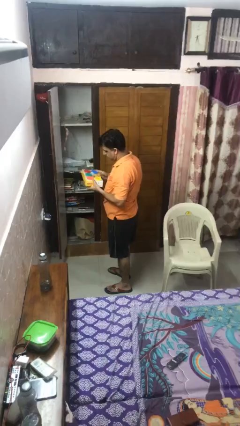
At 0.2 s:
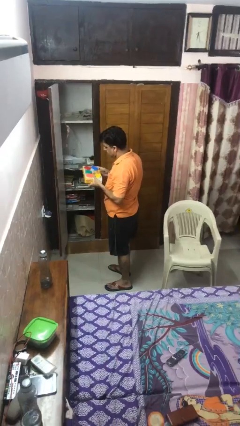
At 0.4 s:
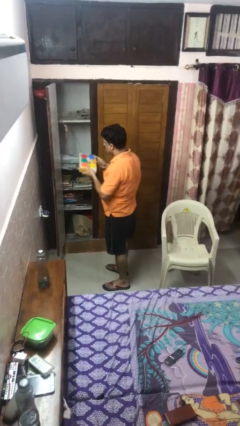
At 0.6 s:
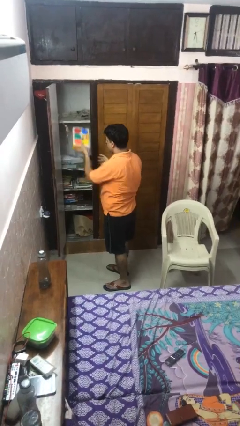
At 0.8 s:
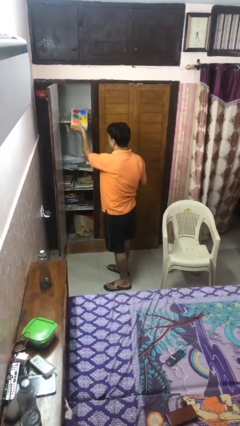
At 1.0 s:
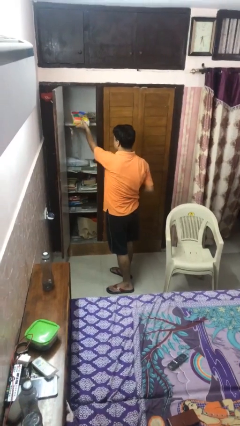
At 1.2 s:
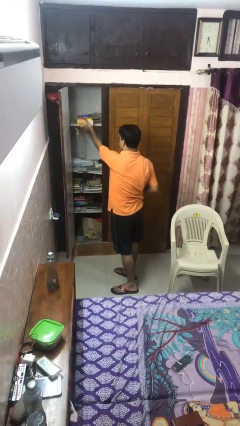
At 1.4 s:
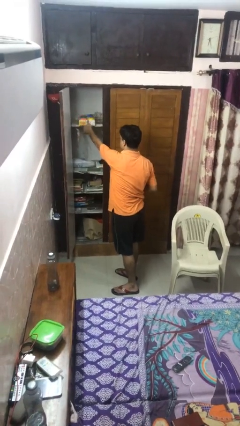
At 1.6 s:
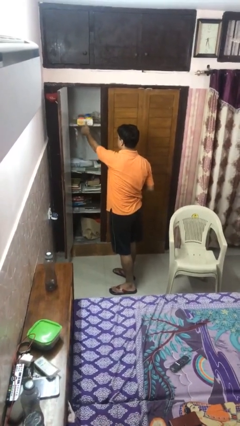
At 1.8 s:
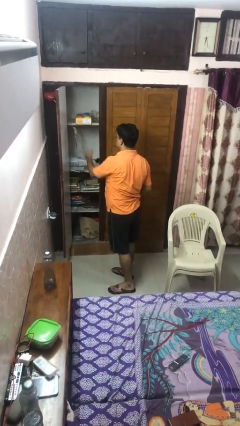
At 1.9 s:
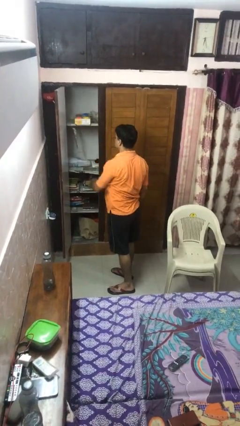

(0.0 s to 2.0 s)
person puts down object on shelf

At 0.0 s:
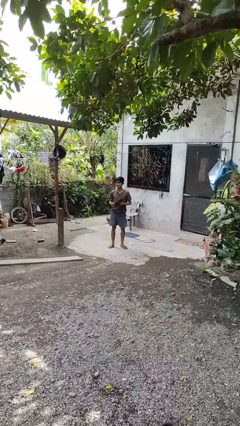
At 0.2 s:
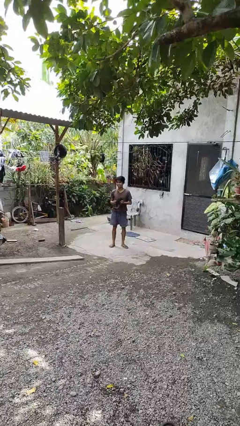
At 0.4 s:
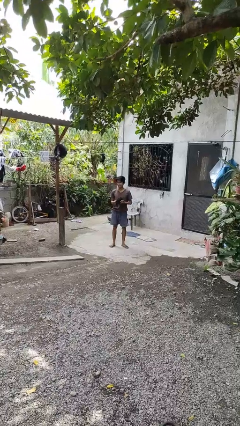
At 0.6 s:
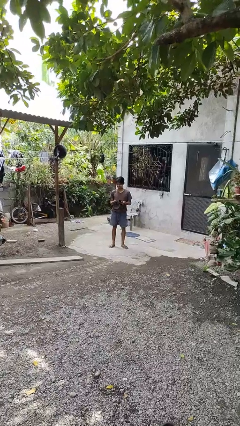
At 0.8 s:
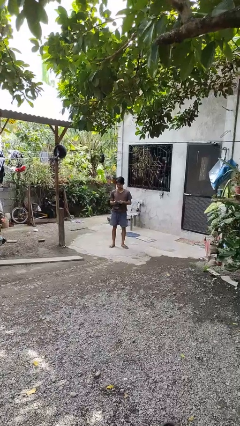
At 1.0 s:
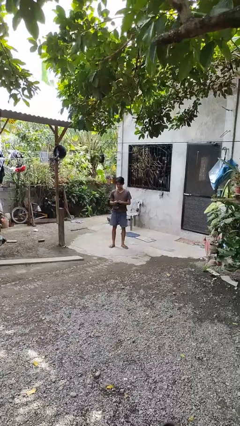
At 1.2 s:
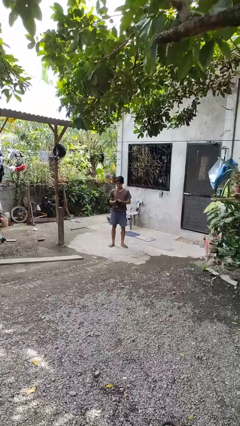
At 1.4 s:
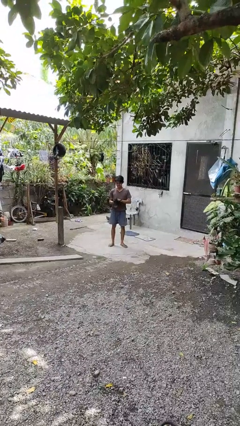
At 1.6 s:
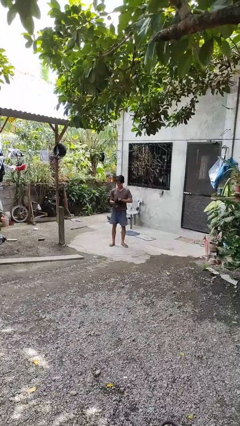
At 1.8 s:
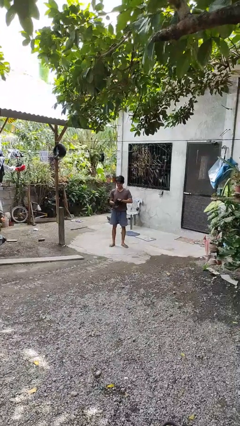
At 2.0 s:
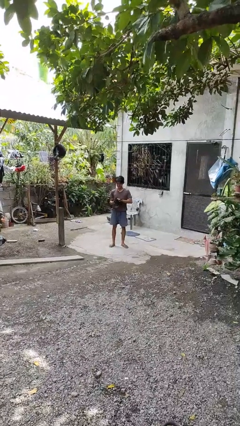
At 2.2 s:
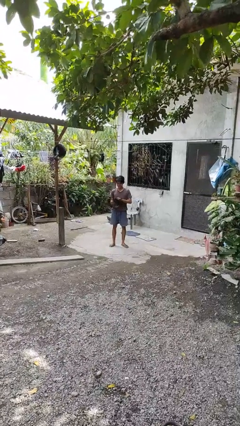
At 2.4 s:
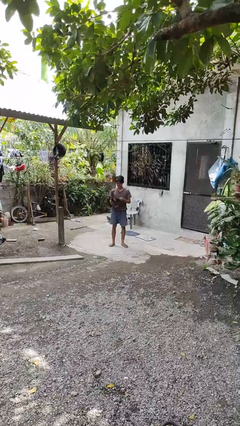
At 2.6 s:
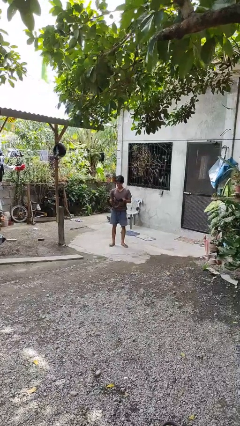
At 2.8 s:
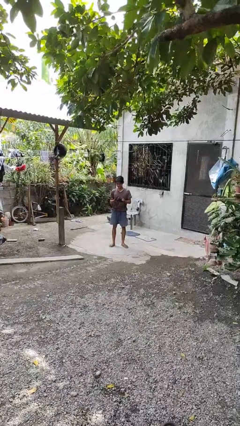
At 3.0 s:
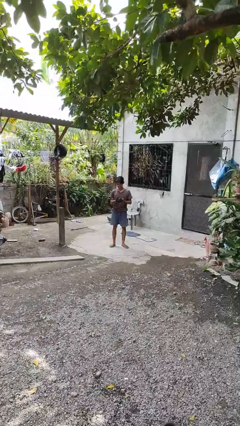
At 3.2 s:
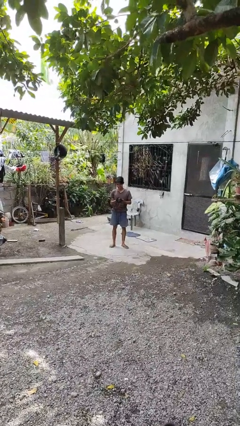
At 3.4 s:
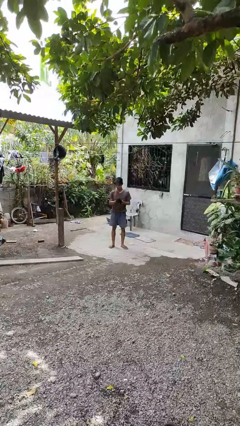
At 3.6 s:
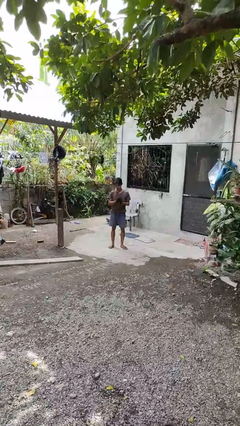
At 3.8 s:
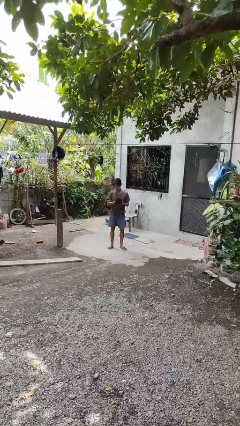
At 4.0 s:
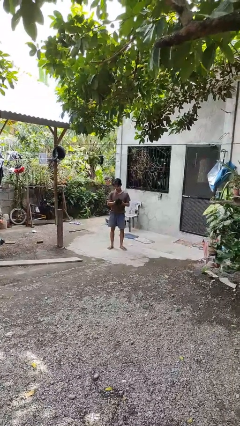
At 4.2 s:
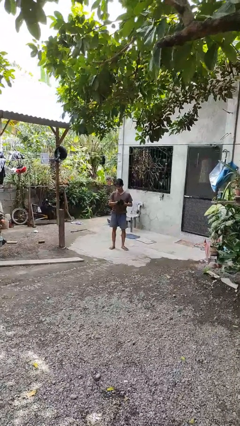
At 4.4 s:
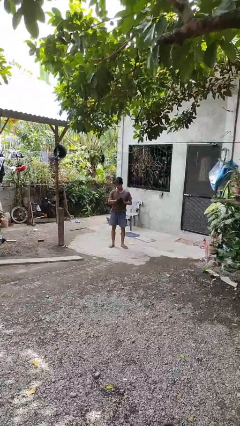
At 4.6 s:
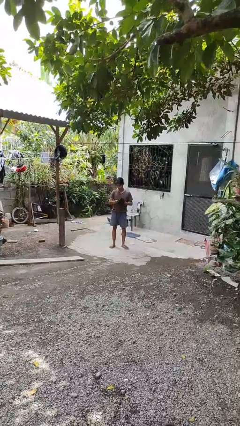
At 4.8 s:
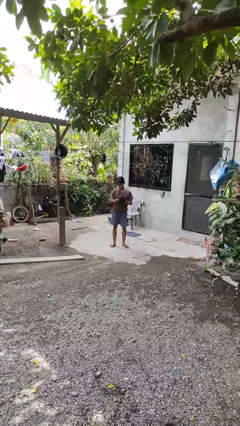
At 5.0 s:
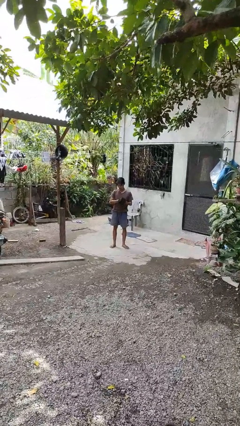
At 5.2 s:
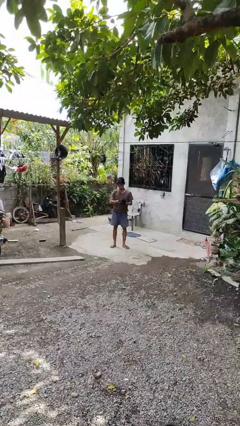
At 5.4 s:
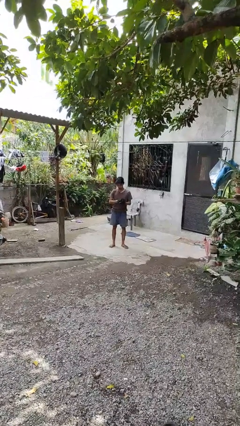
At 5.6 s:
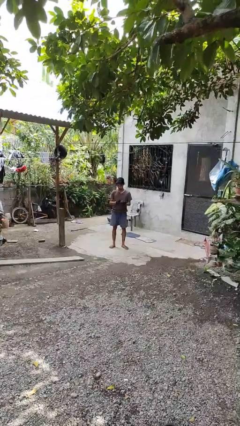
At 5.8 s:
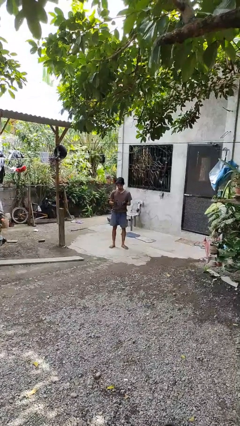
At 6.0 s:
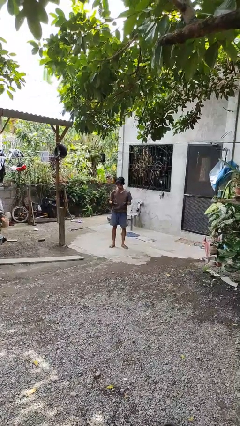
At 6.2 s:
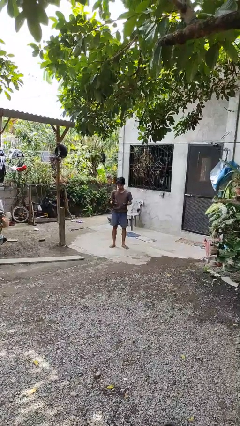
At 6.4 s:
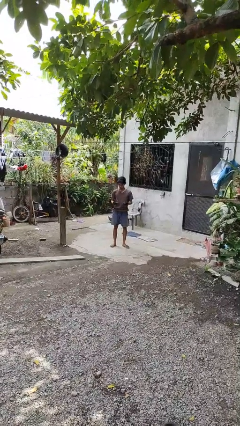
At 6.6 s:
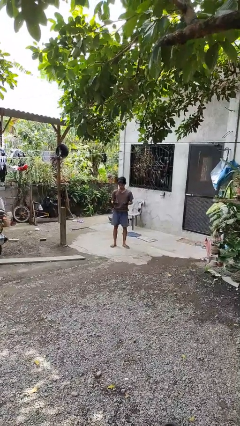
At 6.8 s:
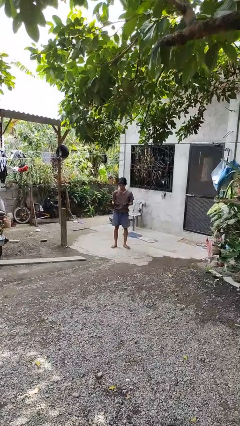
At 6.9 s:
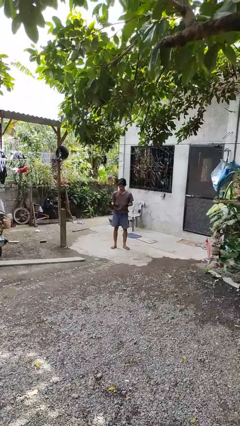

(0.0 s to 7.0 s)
person puts on gloves

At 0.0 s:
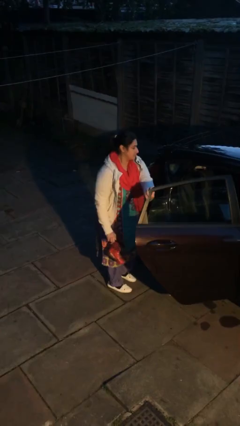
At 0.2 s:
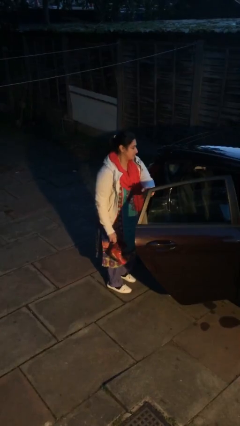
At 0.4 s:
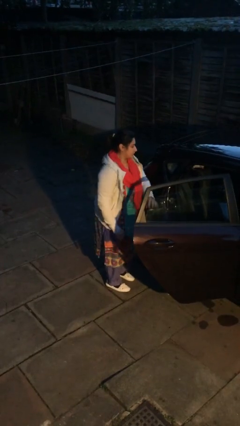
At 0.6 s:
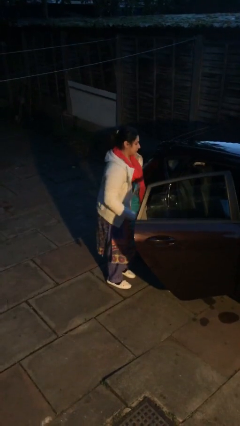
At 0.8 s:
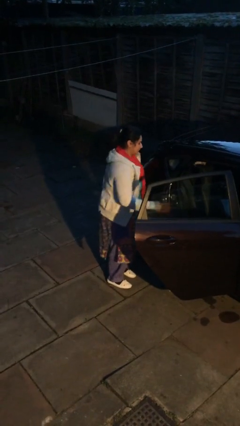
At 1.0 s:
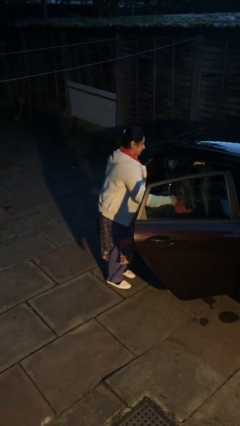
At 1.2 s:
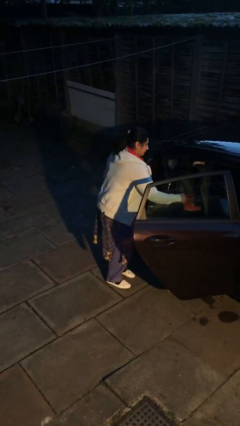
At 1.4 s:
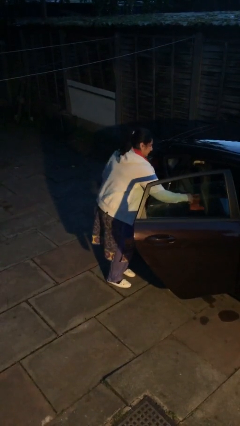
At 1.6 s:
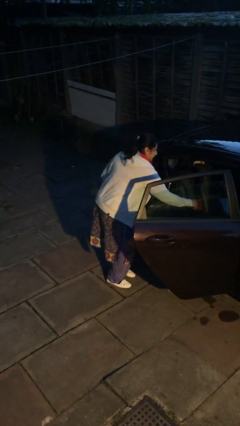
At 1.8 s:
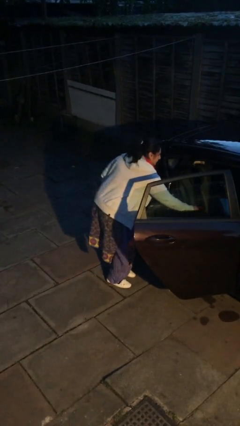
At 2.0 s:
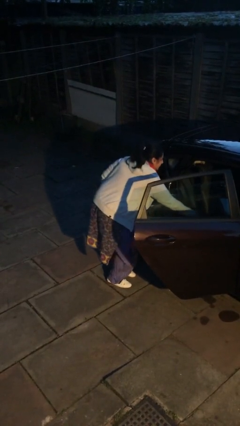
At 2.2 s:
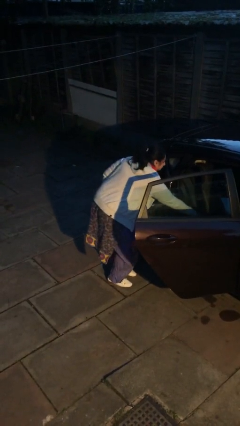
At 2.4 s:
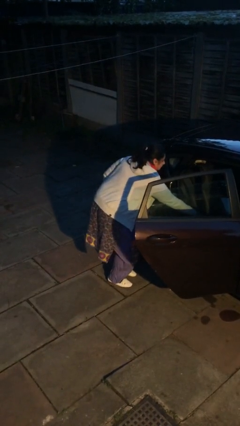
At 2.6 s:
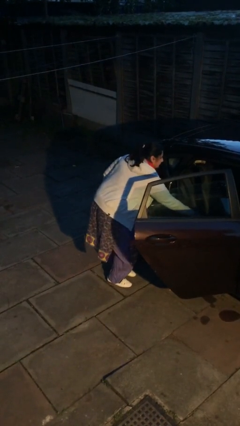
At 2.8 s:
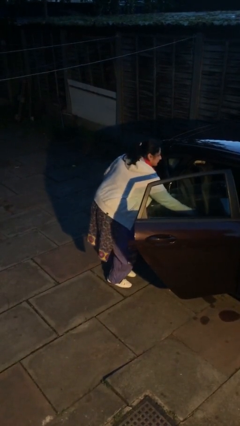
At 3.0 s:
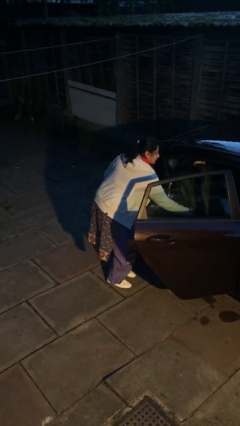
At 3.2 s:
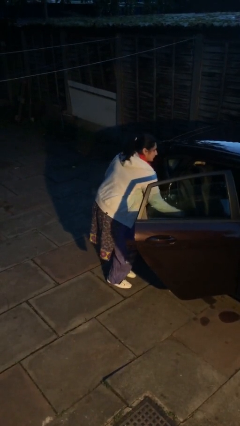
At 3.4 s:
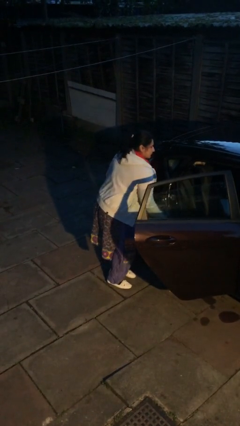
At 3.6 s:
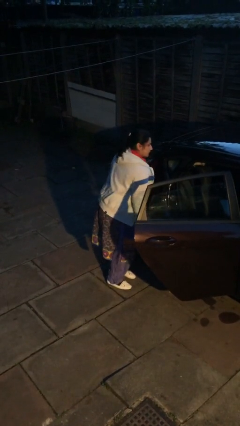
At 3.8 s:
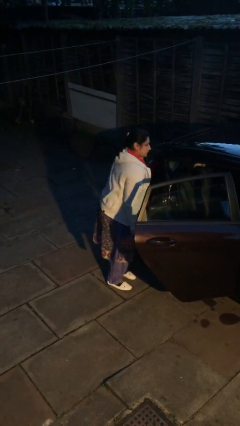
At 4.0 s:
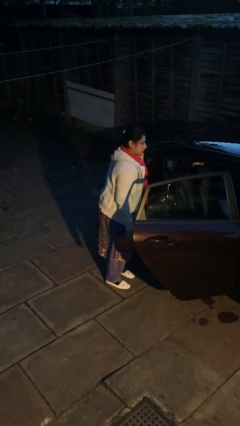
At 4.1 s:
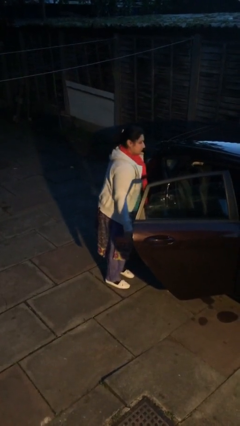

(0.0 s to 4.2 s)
person loads car

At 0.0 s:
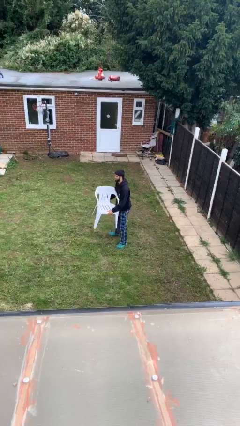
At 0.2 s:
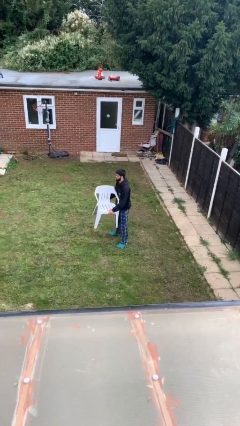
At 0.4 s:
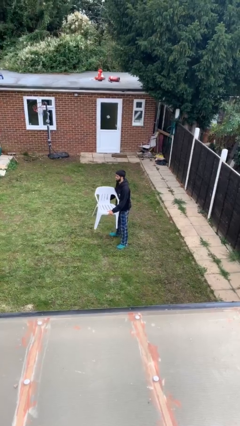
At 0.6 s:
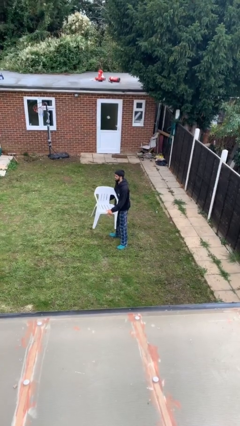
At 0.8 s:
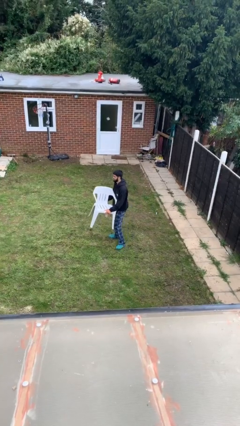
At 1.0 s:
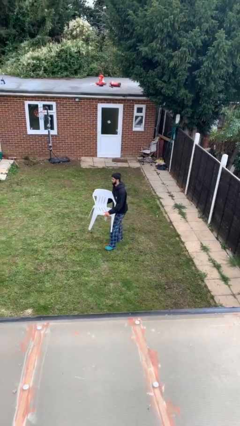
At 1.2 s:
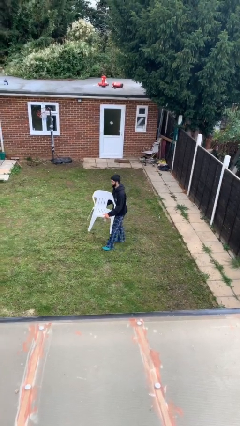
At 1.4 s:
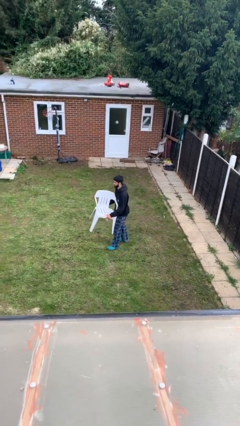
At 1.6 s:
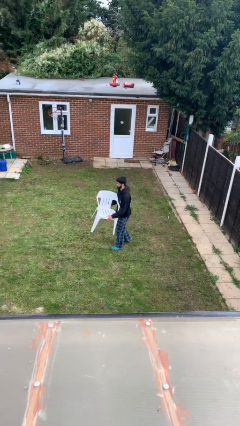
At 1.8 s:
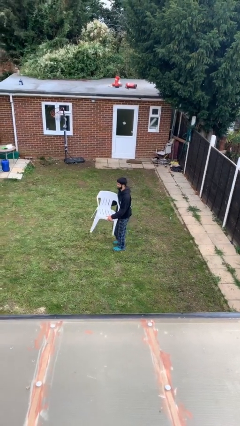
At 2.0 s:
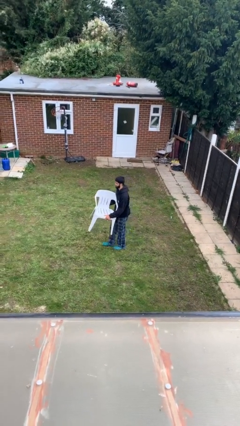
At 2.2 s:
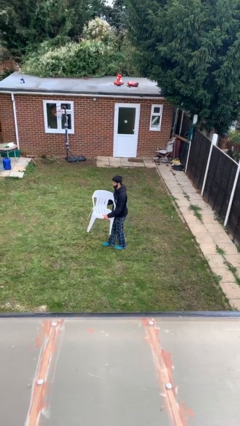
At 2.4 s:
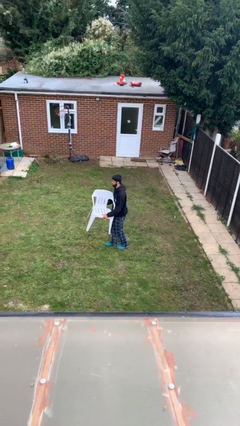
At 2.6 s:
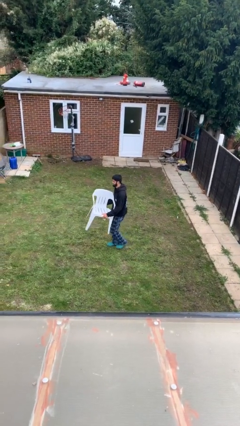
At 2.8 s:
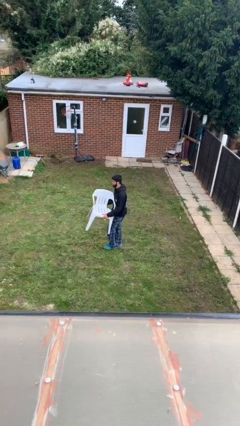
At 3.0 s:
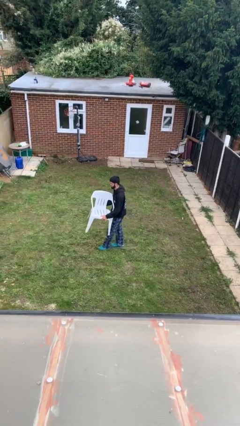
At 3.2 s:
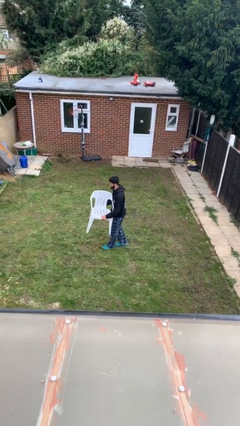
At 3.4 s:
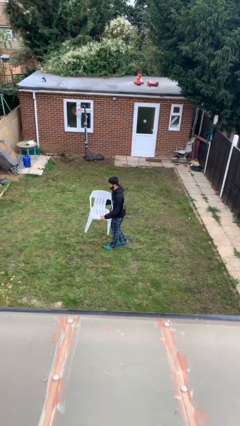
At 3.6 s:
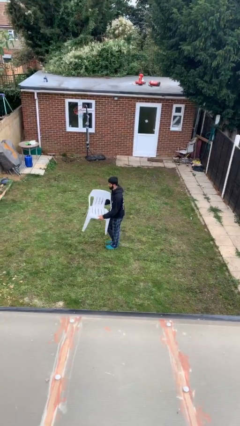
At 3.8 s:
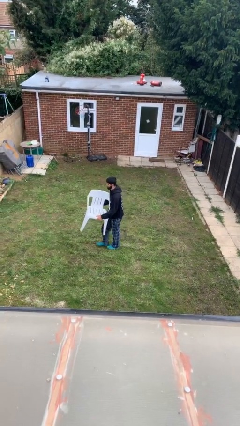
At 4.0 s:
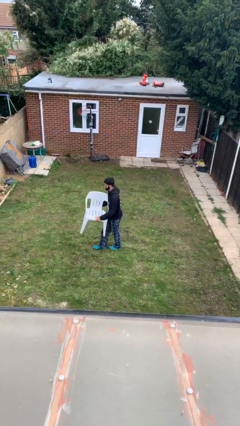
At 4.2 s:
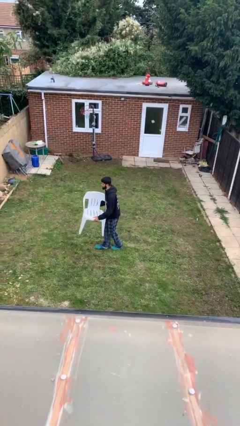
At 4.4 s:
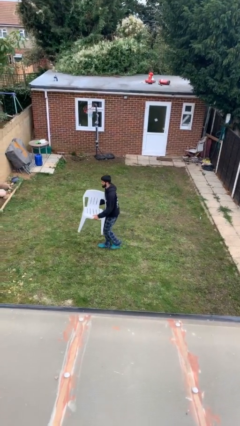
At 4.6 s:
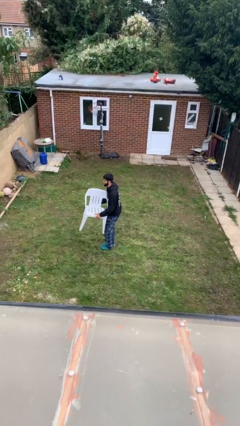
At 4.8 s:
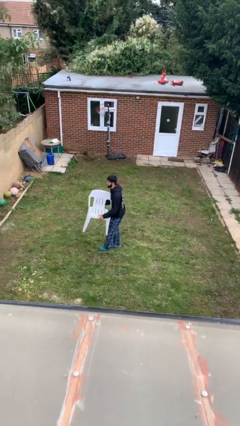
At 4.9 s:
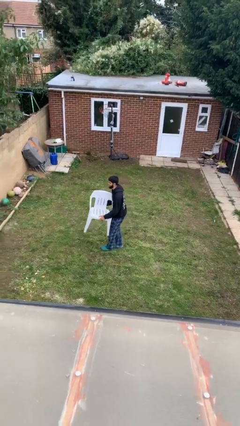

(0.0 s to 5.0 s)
person carries heavy object
